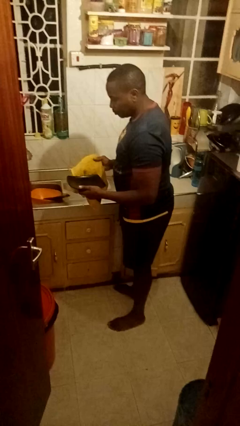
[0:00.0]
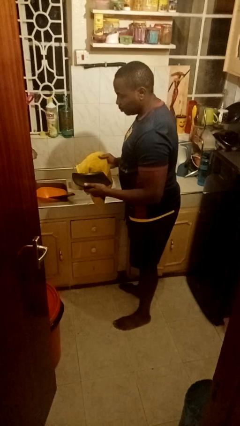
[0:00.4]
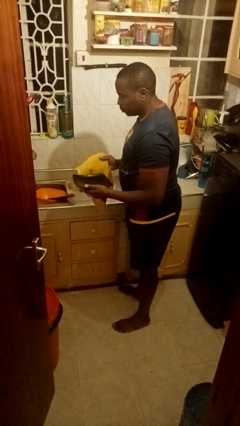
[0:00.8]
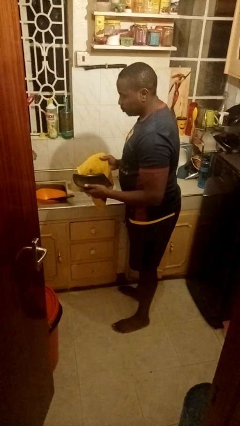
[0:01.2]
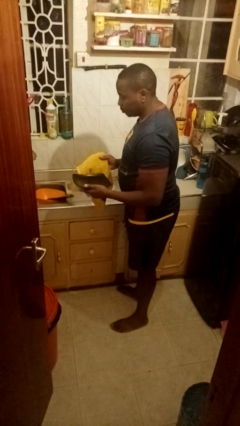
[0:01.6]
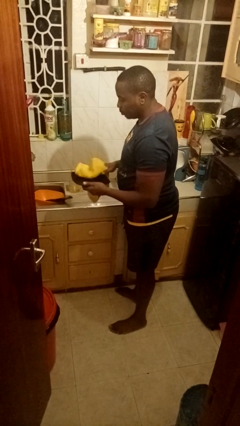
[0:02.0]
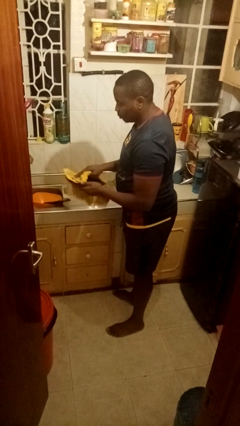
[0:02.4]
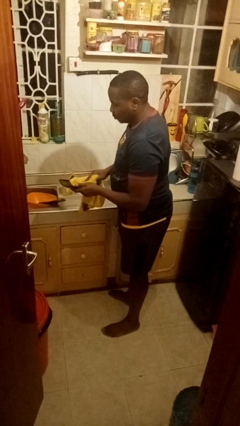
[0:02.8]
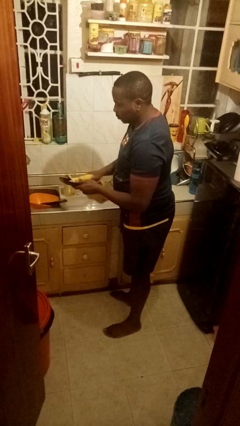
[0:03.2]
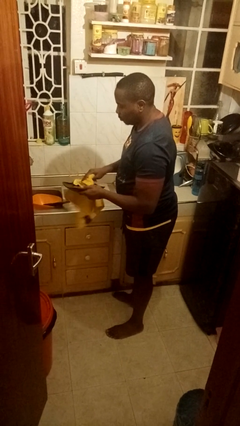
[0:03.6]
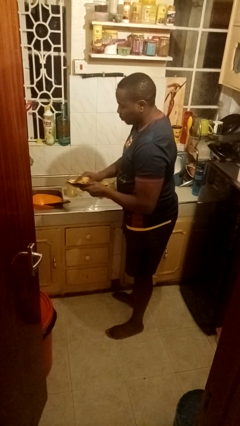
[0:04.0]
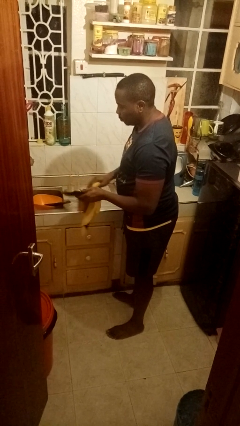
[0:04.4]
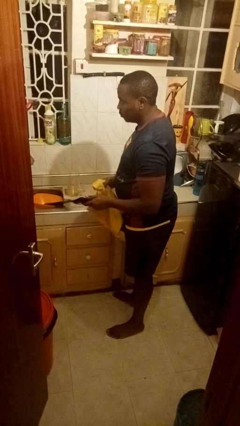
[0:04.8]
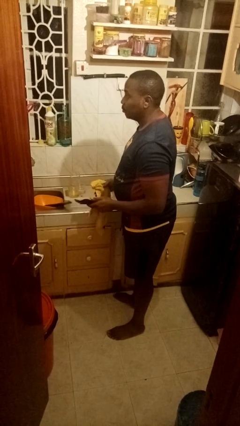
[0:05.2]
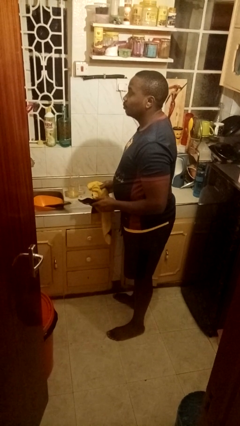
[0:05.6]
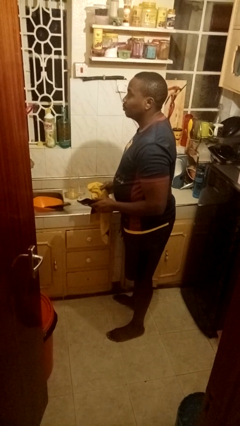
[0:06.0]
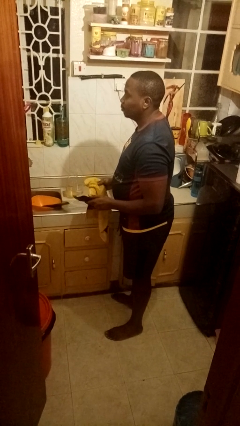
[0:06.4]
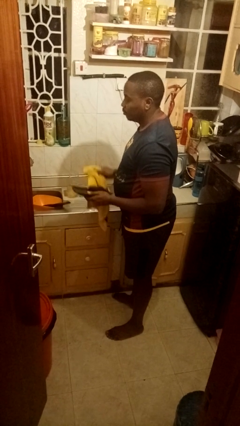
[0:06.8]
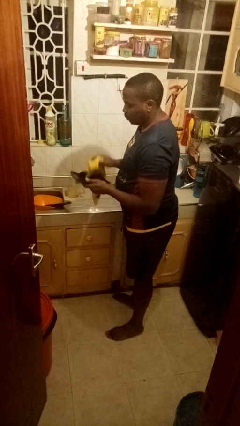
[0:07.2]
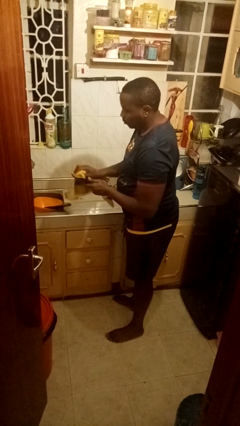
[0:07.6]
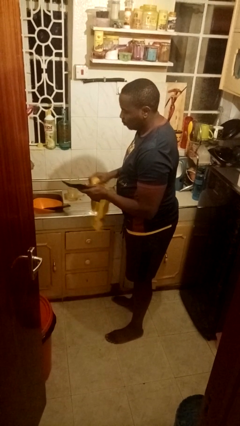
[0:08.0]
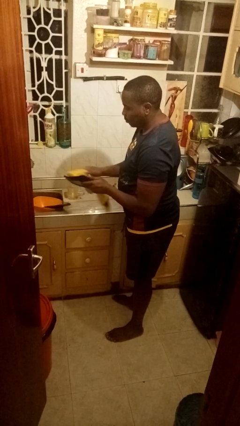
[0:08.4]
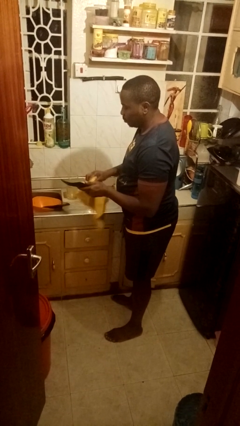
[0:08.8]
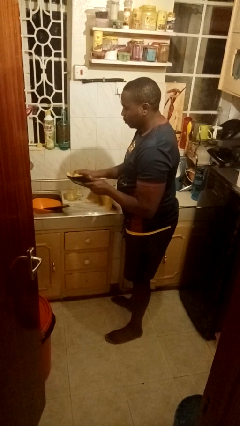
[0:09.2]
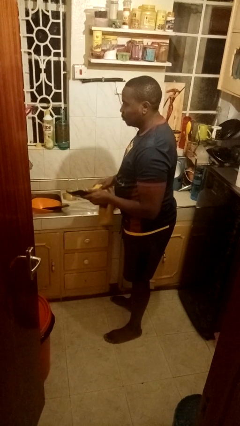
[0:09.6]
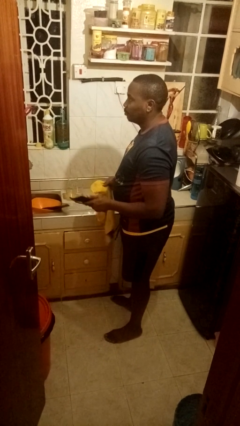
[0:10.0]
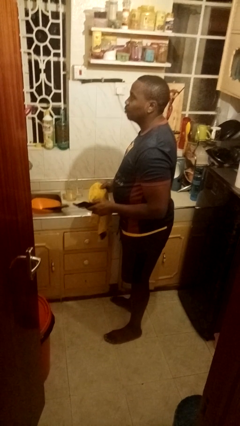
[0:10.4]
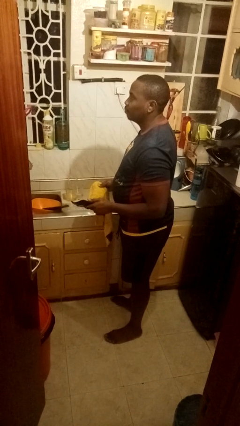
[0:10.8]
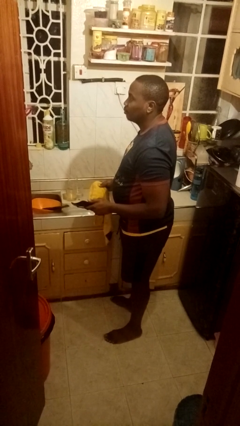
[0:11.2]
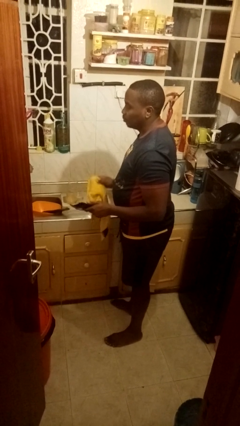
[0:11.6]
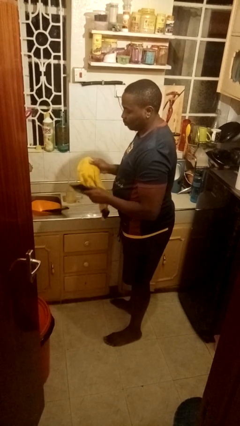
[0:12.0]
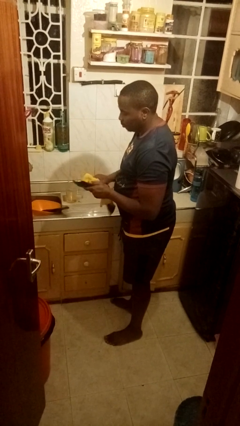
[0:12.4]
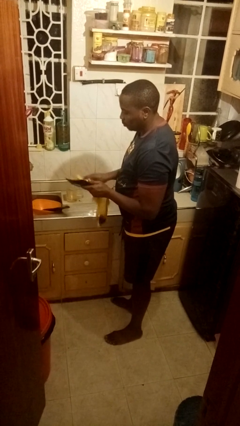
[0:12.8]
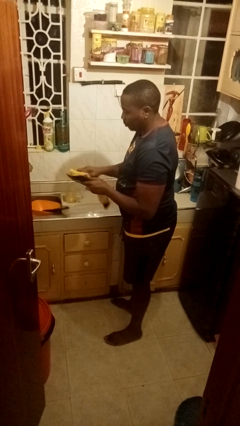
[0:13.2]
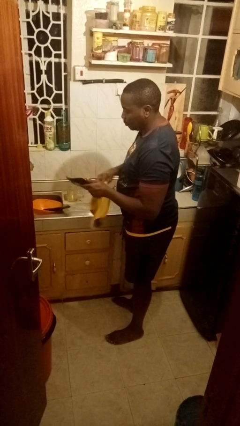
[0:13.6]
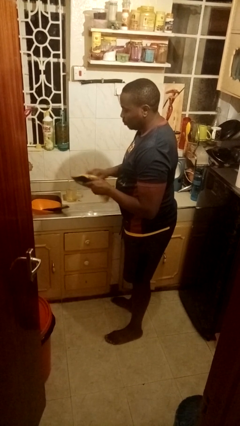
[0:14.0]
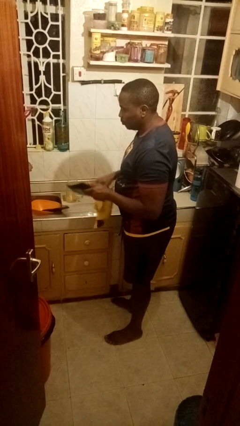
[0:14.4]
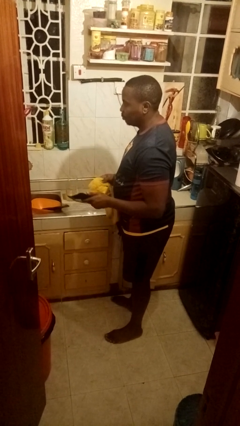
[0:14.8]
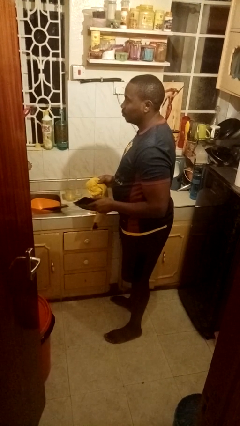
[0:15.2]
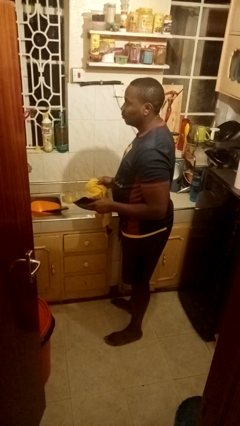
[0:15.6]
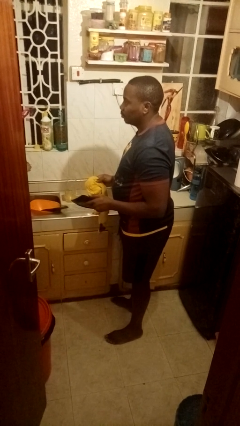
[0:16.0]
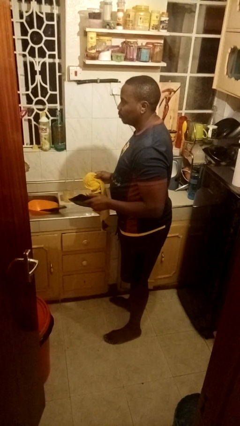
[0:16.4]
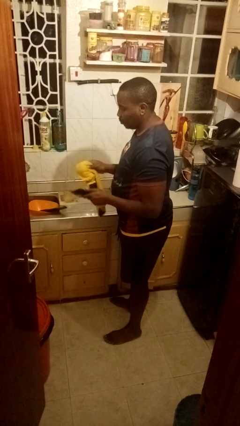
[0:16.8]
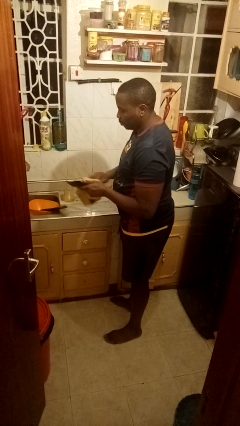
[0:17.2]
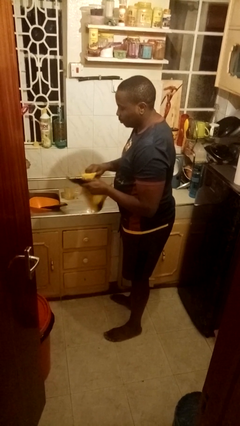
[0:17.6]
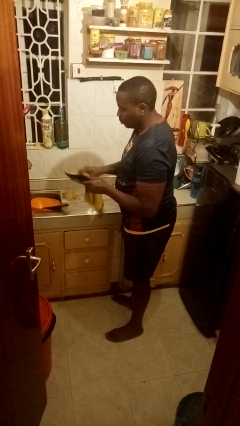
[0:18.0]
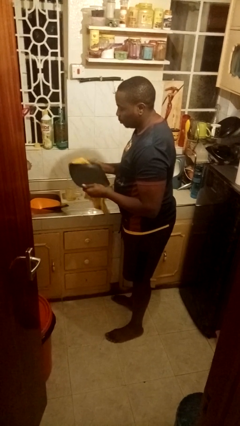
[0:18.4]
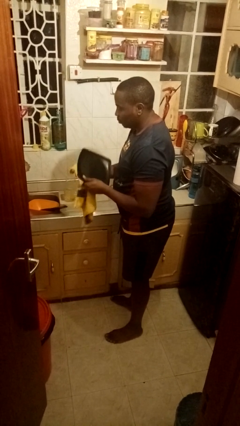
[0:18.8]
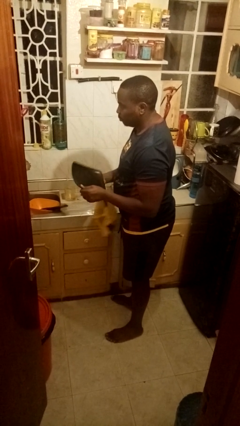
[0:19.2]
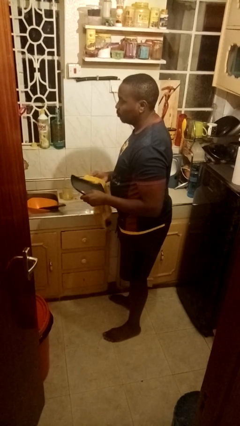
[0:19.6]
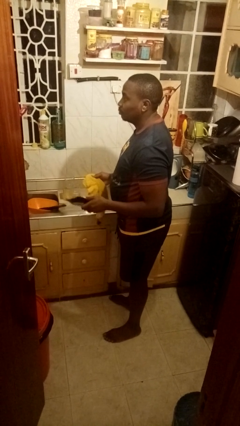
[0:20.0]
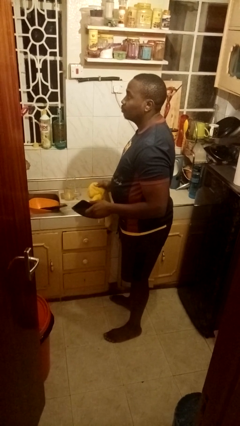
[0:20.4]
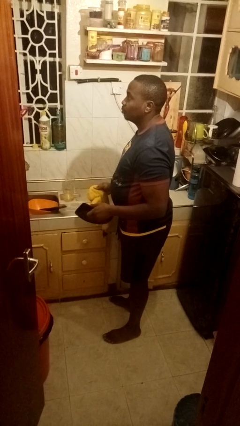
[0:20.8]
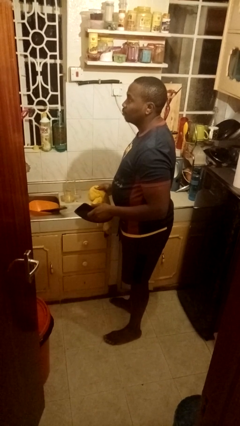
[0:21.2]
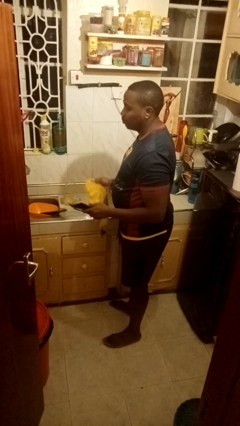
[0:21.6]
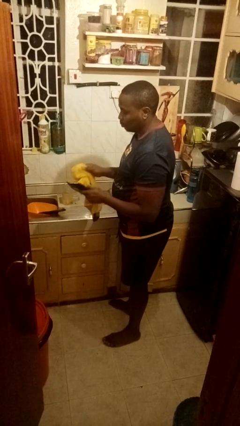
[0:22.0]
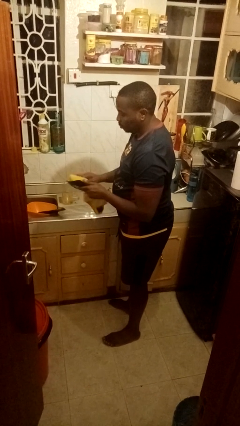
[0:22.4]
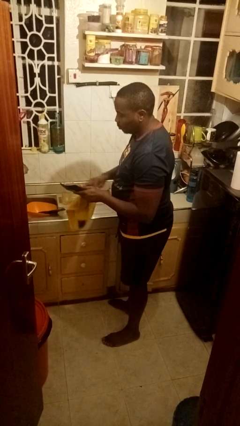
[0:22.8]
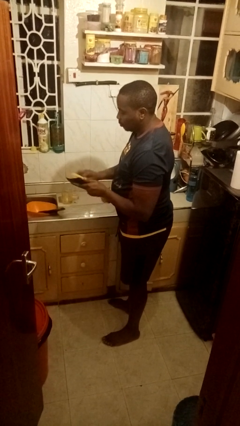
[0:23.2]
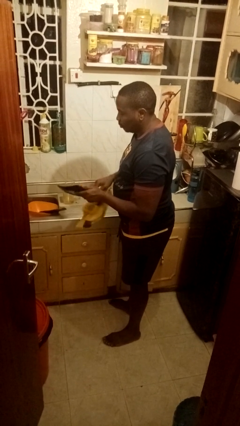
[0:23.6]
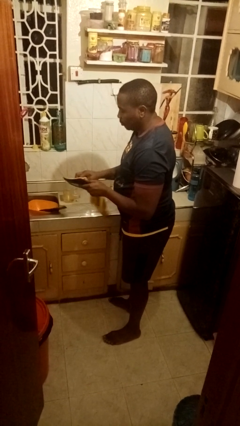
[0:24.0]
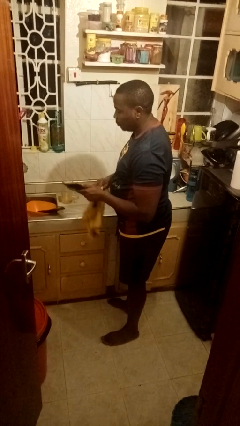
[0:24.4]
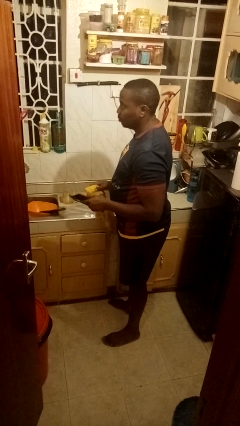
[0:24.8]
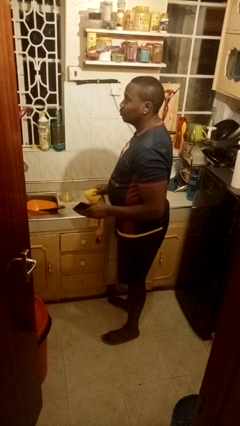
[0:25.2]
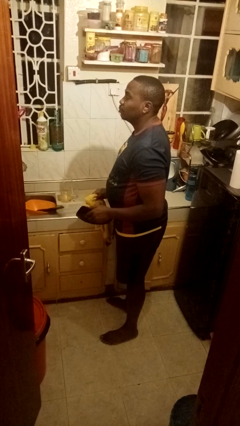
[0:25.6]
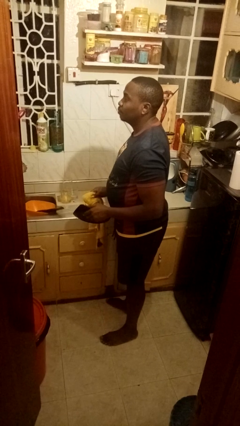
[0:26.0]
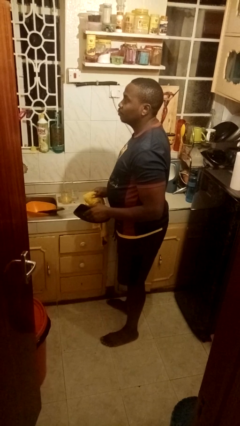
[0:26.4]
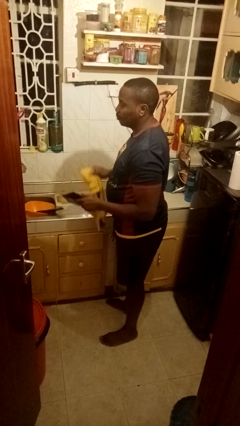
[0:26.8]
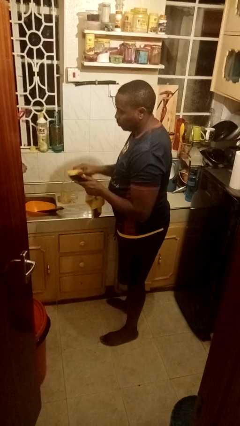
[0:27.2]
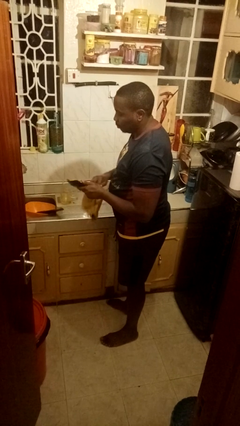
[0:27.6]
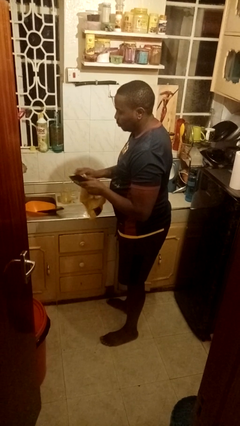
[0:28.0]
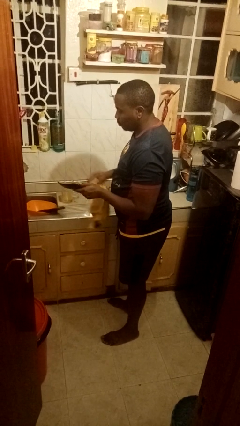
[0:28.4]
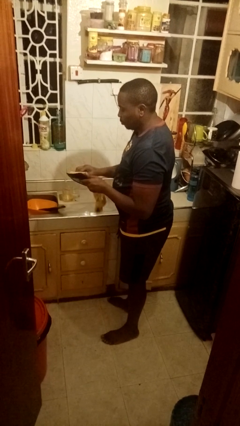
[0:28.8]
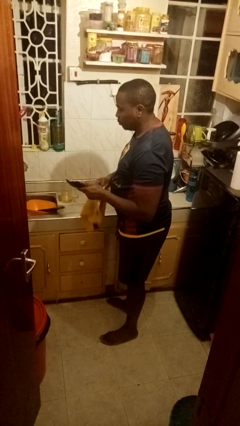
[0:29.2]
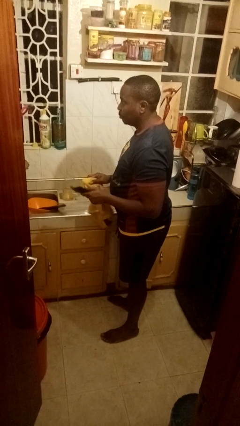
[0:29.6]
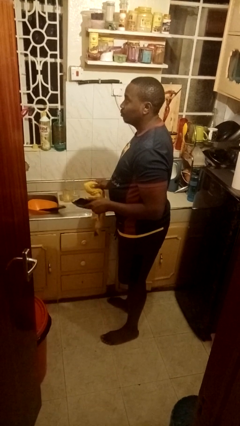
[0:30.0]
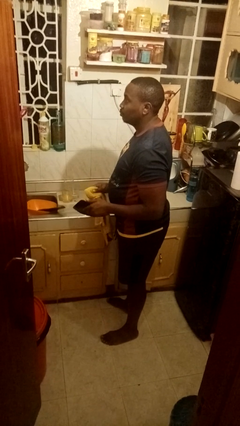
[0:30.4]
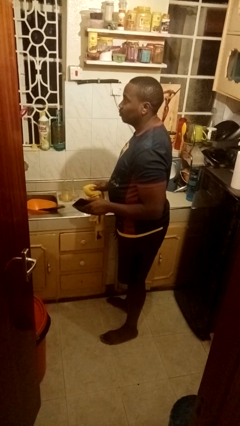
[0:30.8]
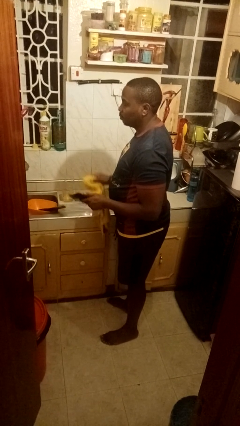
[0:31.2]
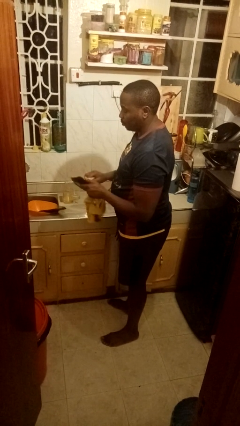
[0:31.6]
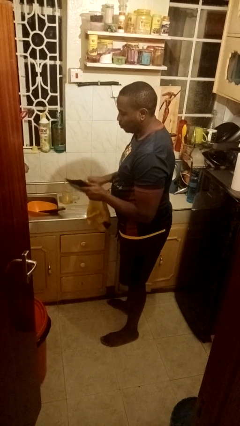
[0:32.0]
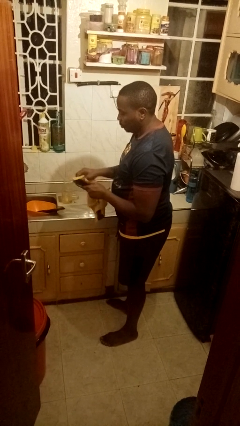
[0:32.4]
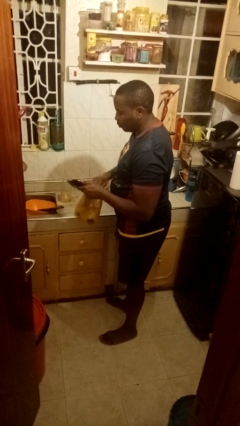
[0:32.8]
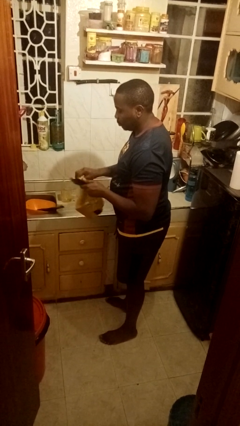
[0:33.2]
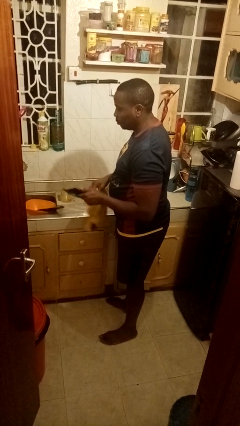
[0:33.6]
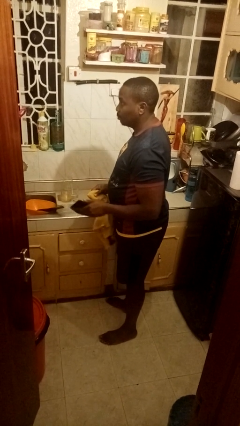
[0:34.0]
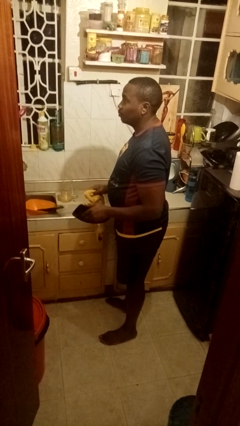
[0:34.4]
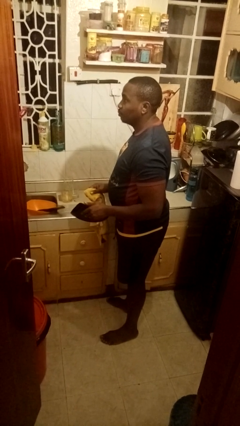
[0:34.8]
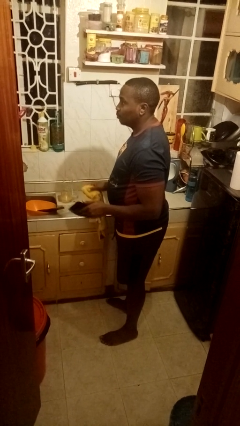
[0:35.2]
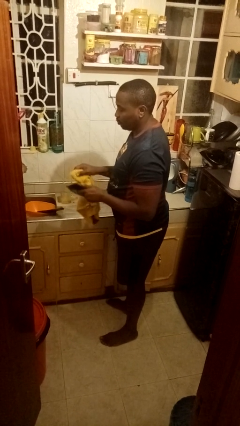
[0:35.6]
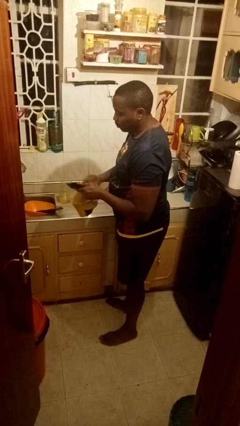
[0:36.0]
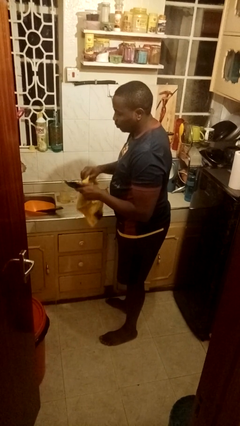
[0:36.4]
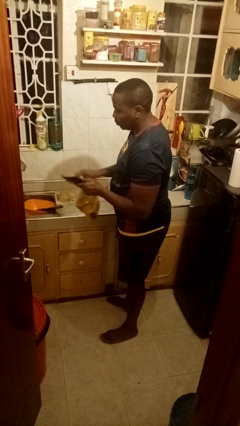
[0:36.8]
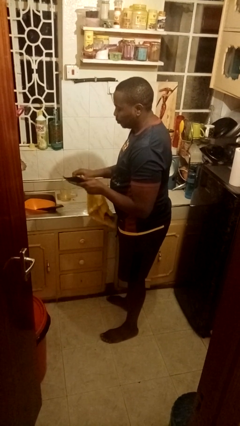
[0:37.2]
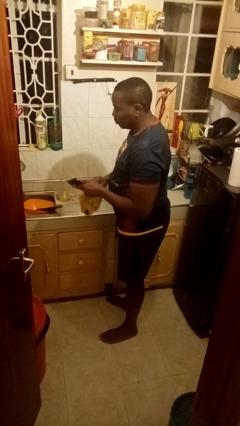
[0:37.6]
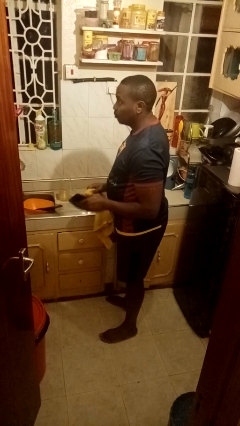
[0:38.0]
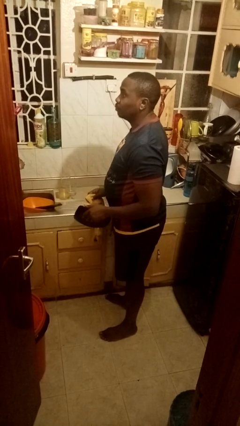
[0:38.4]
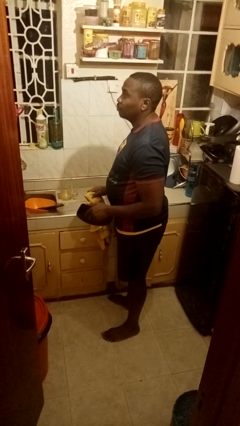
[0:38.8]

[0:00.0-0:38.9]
person dries dish
